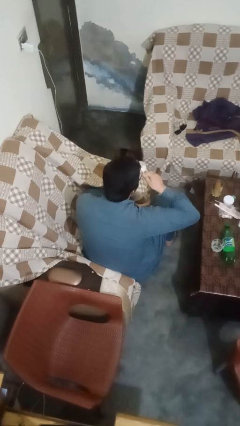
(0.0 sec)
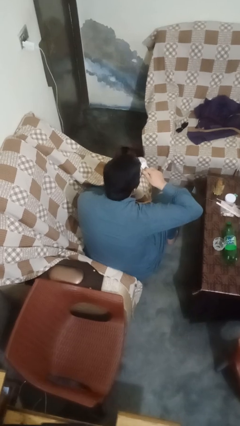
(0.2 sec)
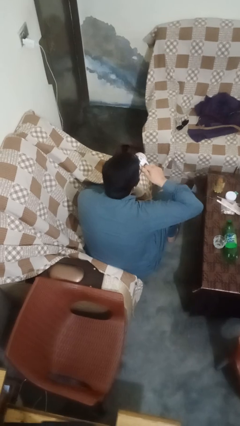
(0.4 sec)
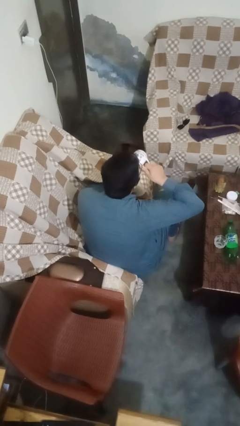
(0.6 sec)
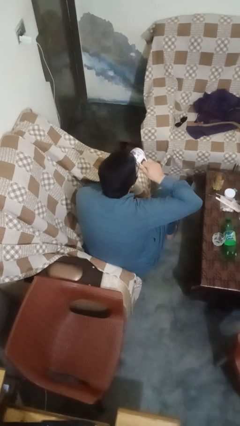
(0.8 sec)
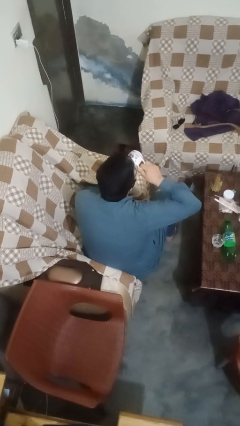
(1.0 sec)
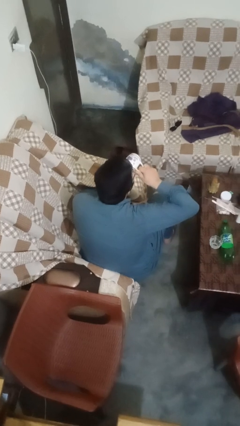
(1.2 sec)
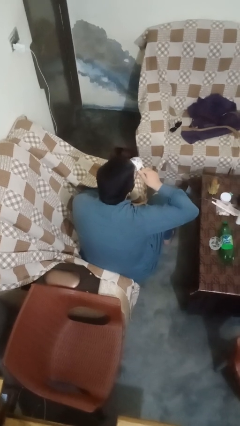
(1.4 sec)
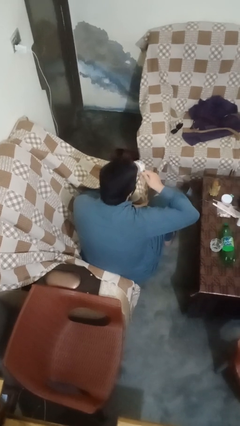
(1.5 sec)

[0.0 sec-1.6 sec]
person drinks from mug

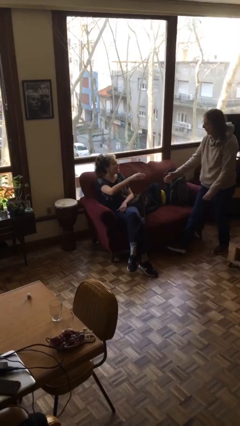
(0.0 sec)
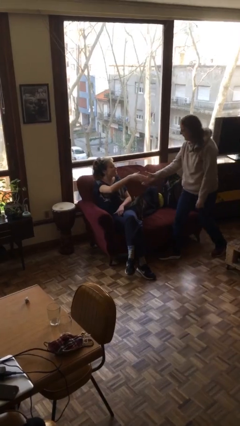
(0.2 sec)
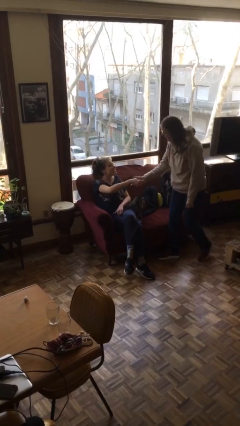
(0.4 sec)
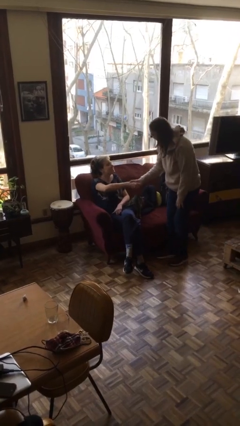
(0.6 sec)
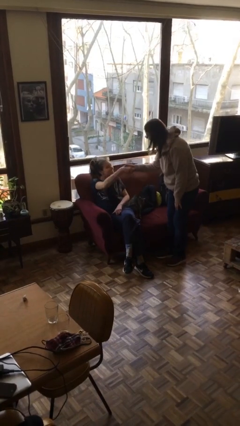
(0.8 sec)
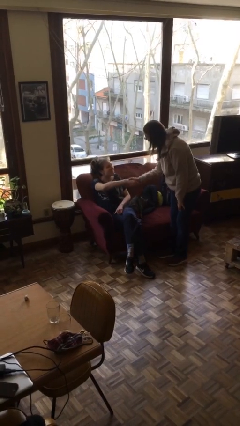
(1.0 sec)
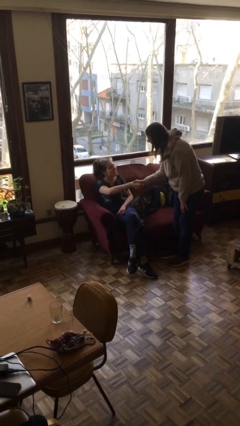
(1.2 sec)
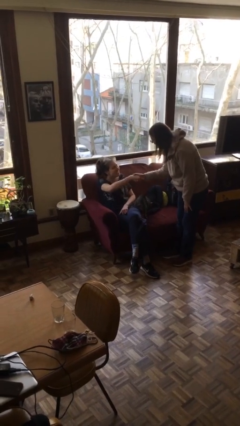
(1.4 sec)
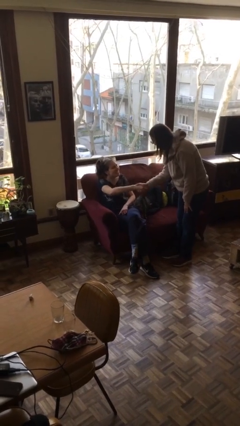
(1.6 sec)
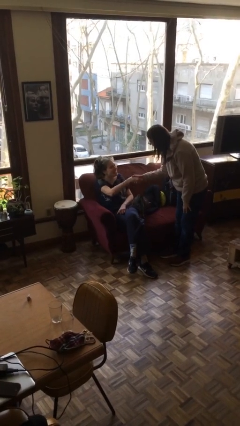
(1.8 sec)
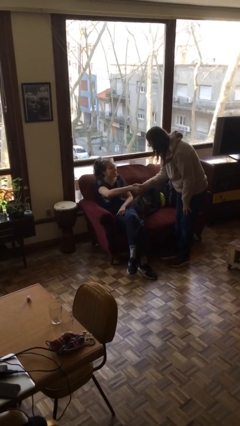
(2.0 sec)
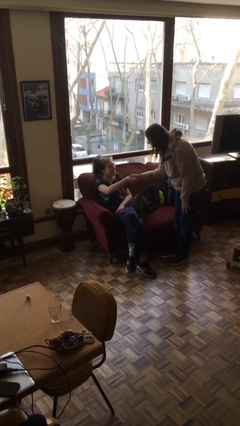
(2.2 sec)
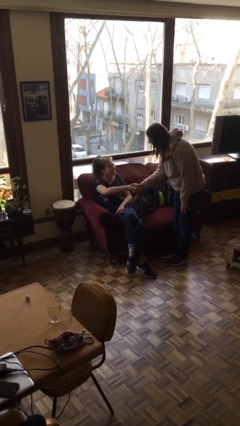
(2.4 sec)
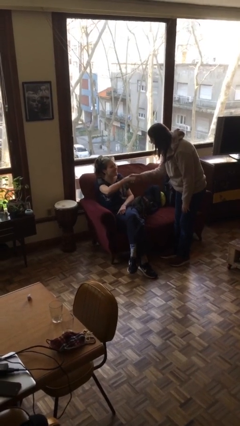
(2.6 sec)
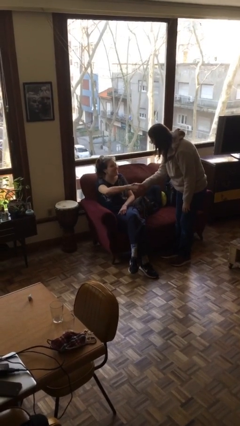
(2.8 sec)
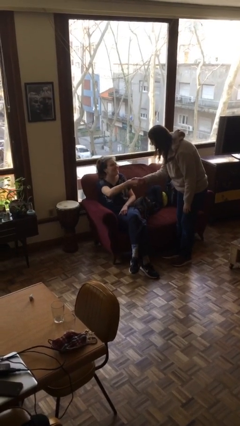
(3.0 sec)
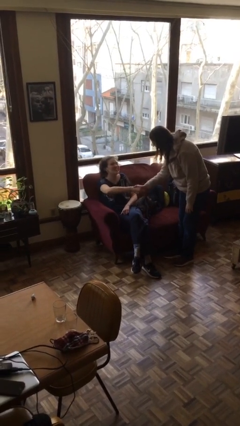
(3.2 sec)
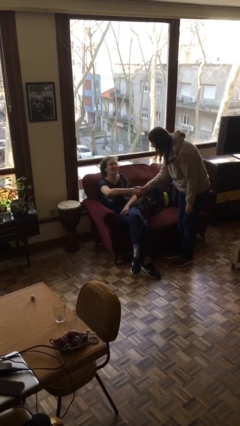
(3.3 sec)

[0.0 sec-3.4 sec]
person shakes hand

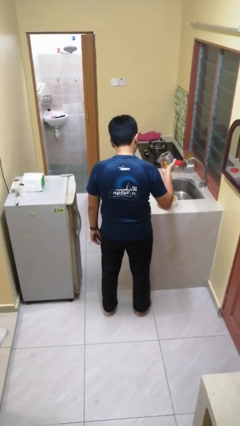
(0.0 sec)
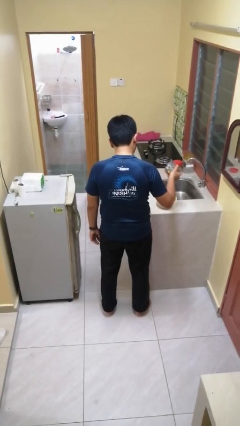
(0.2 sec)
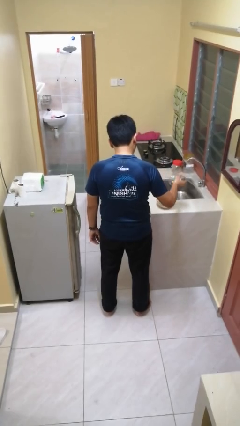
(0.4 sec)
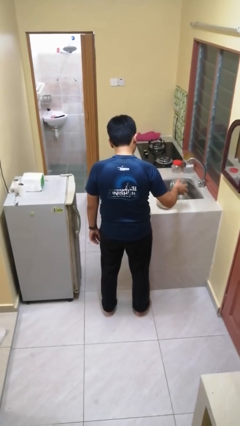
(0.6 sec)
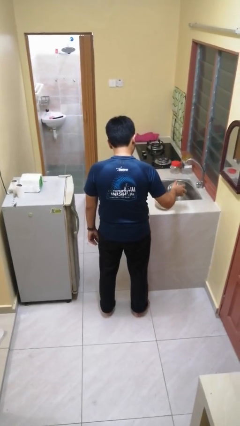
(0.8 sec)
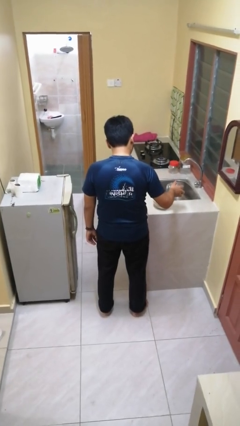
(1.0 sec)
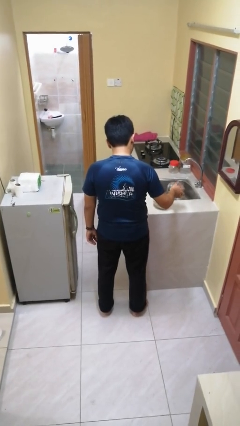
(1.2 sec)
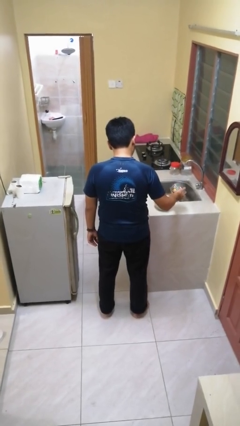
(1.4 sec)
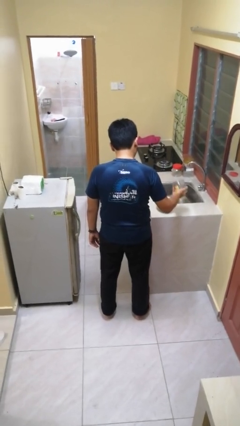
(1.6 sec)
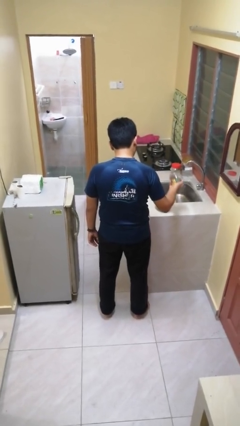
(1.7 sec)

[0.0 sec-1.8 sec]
person pours into bowl

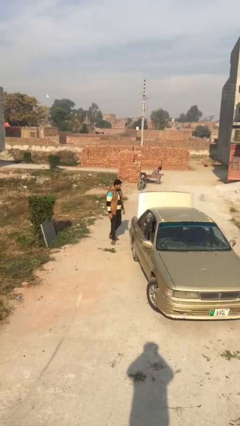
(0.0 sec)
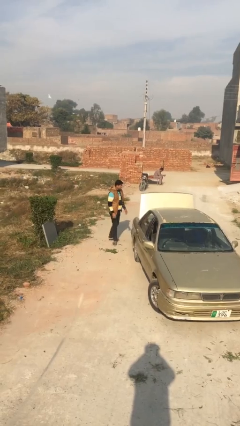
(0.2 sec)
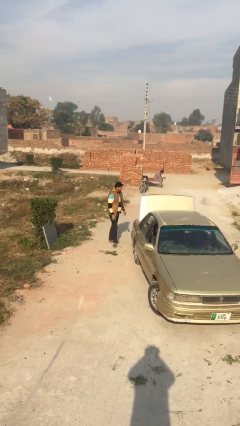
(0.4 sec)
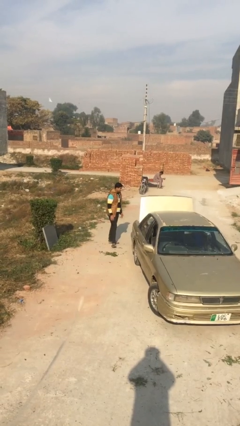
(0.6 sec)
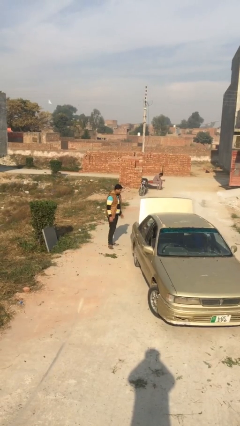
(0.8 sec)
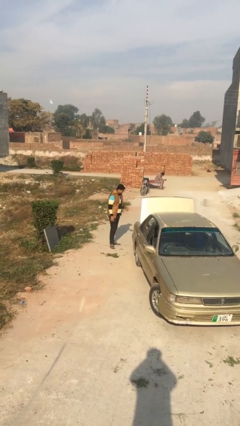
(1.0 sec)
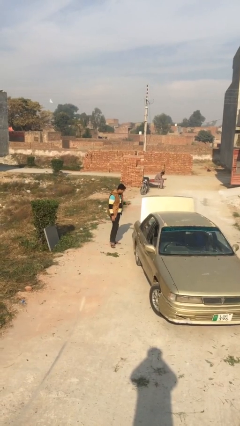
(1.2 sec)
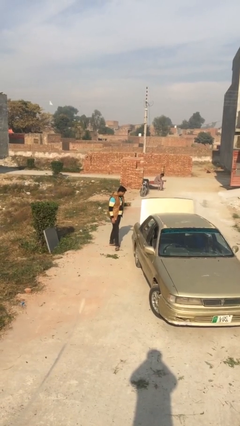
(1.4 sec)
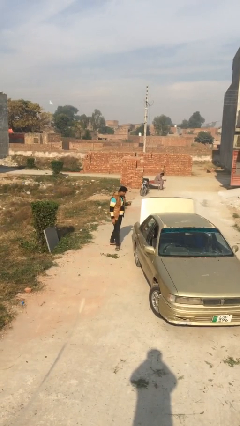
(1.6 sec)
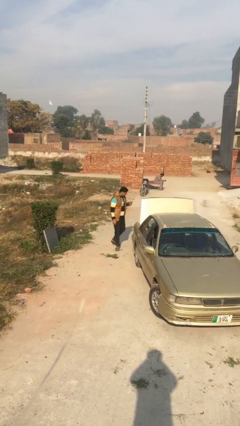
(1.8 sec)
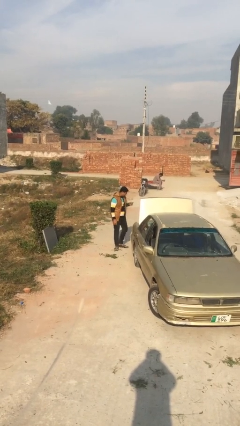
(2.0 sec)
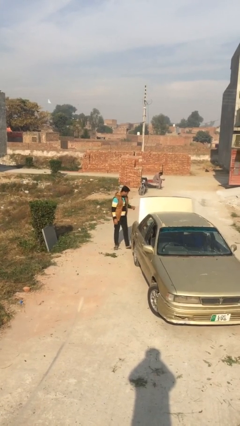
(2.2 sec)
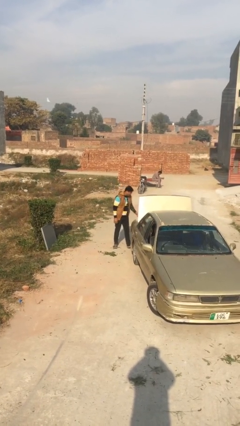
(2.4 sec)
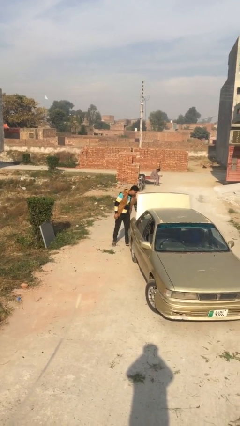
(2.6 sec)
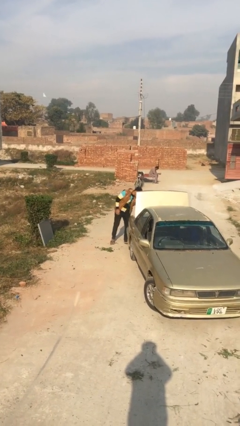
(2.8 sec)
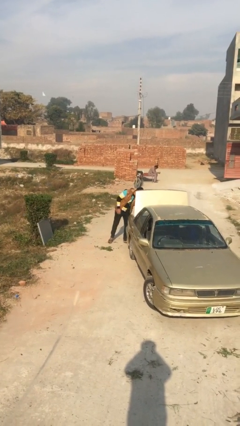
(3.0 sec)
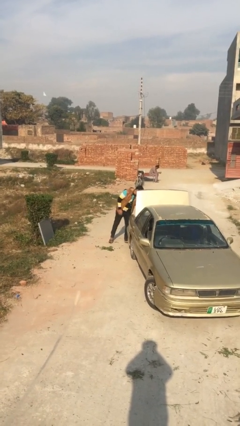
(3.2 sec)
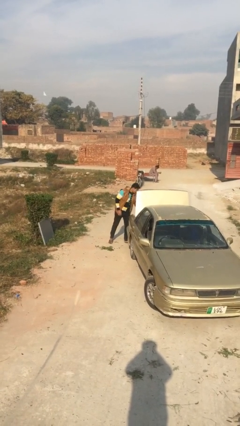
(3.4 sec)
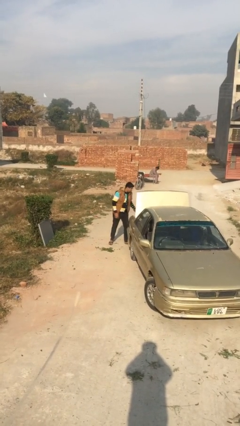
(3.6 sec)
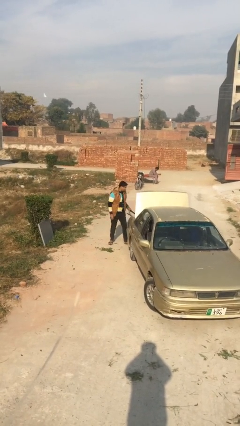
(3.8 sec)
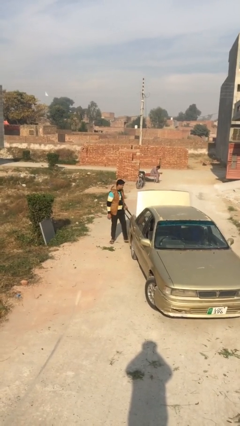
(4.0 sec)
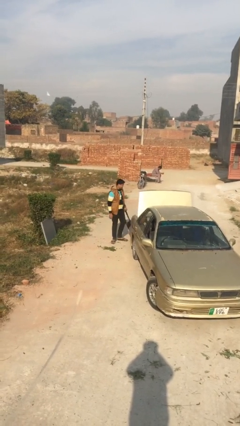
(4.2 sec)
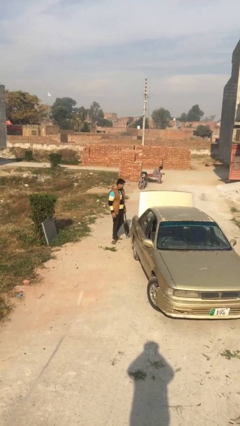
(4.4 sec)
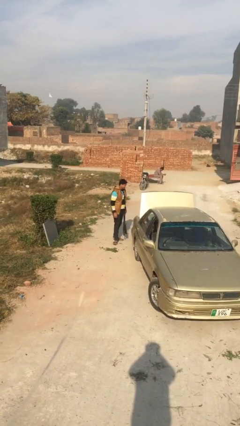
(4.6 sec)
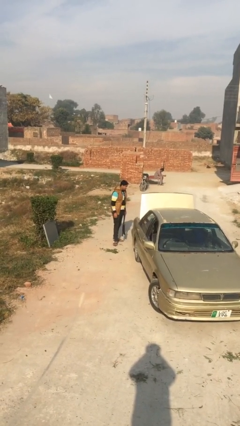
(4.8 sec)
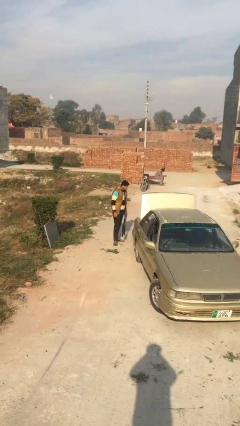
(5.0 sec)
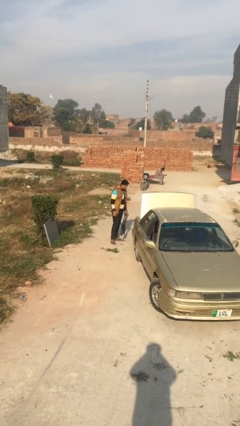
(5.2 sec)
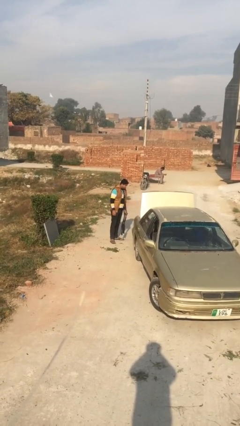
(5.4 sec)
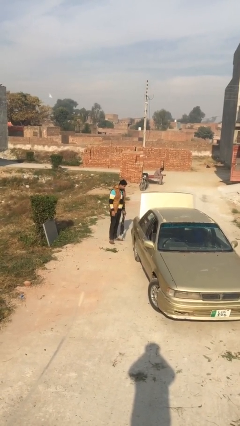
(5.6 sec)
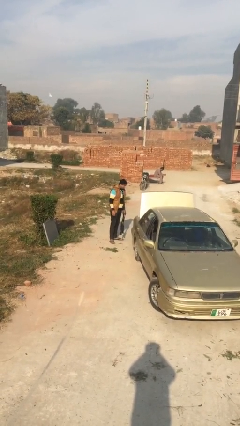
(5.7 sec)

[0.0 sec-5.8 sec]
person unloads car

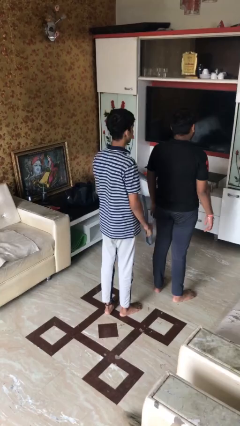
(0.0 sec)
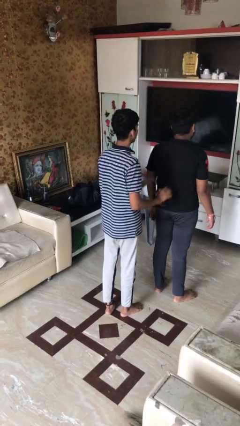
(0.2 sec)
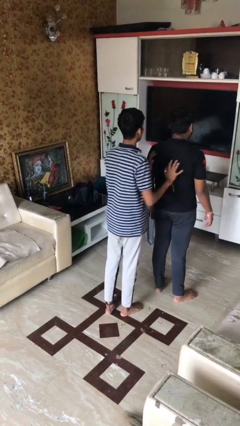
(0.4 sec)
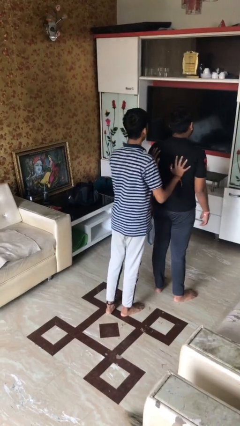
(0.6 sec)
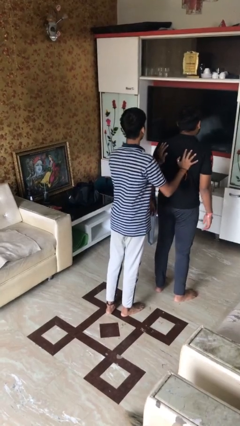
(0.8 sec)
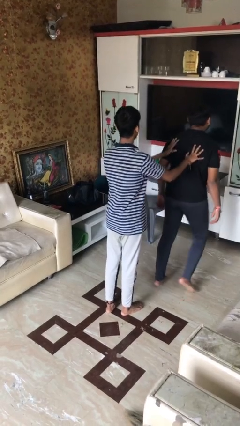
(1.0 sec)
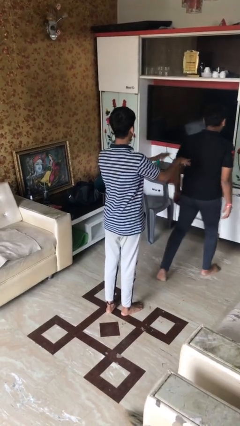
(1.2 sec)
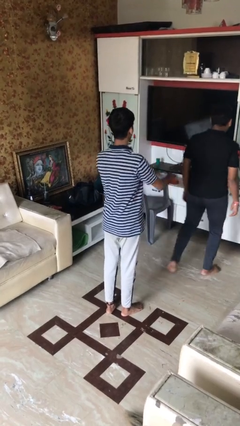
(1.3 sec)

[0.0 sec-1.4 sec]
person shoves person

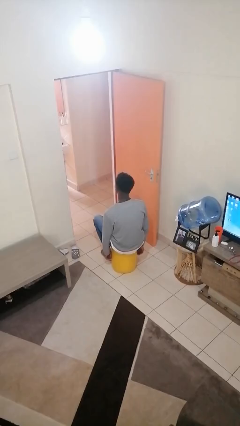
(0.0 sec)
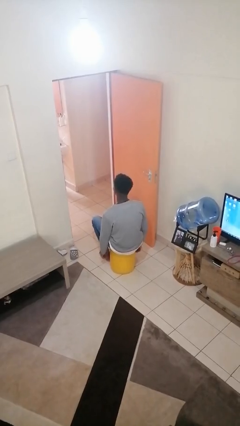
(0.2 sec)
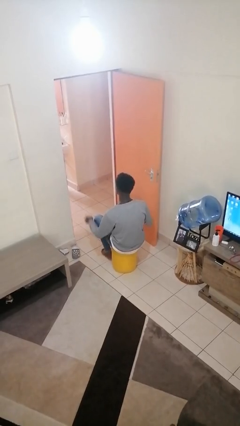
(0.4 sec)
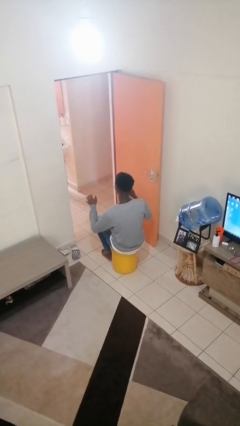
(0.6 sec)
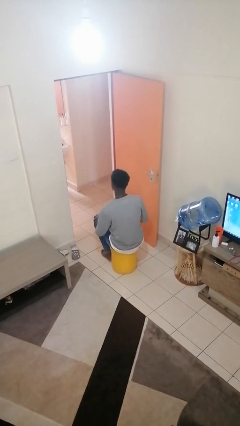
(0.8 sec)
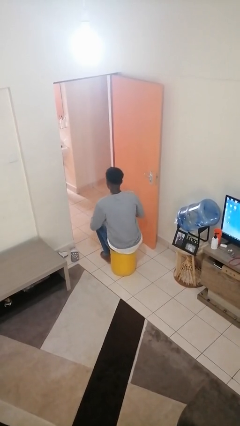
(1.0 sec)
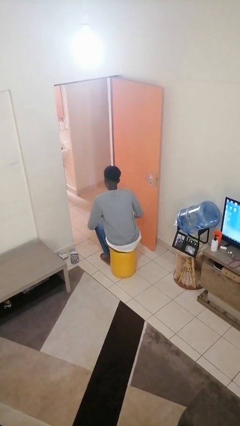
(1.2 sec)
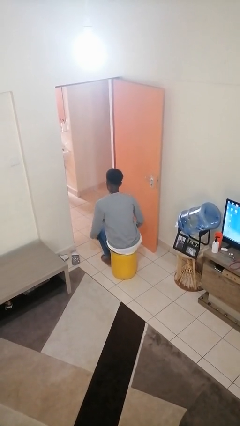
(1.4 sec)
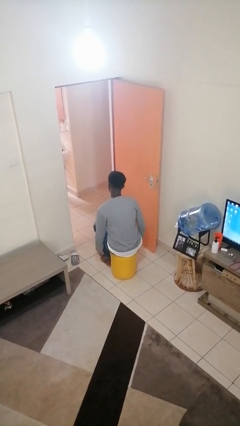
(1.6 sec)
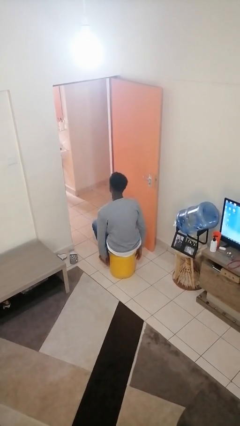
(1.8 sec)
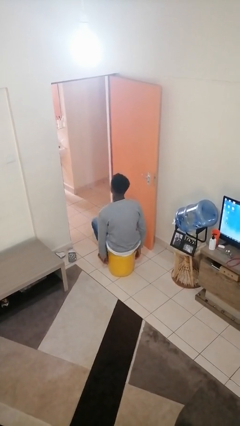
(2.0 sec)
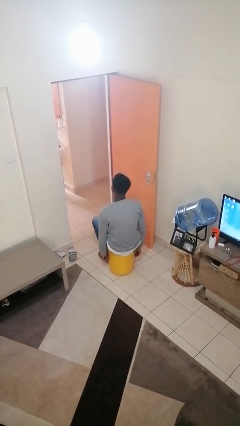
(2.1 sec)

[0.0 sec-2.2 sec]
person slaps hands on thighs

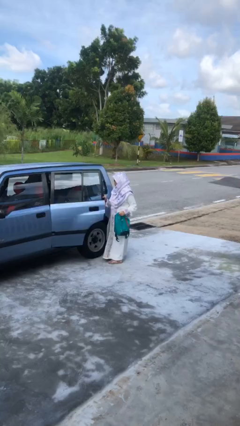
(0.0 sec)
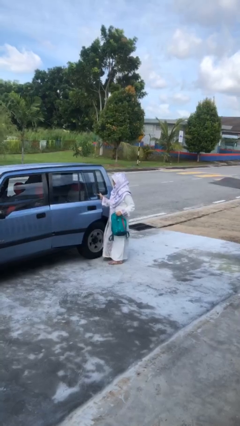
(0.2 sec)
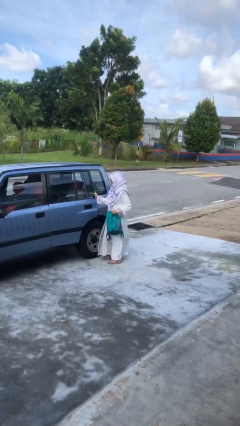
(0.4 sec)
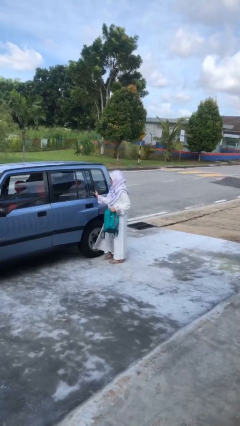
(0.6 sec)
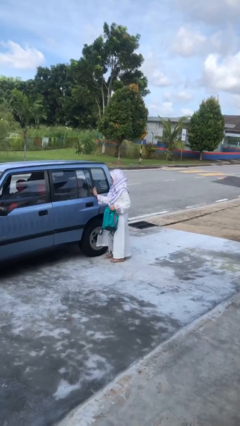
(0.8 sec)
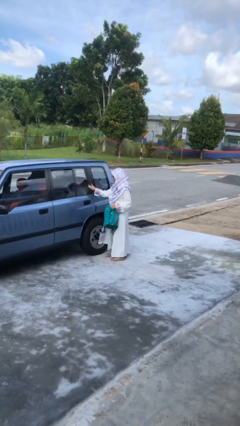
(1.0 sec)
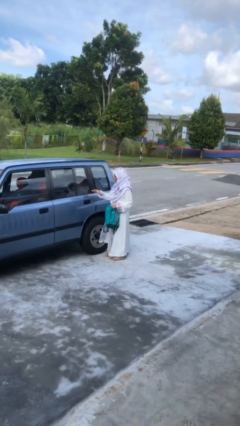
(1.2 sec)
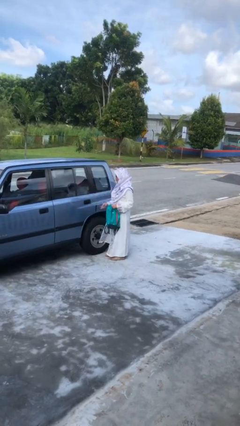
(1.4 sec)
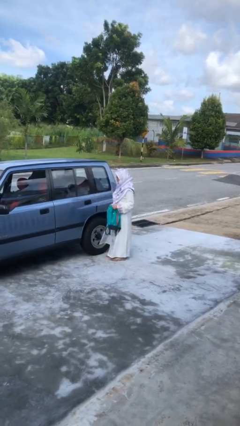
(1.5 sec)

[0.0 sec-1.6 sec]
person closes car door
